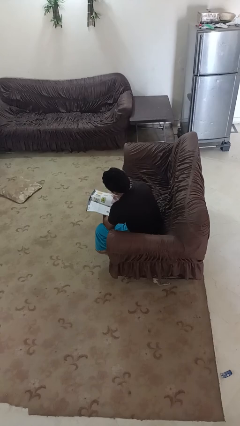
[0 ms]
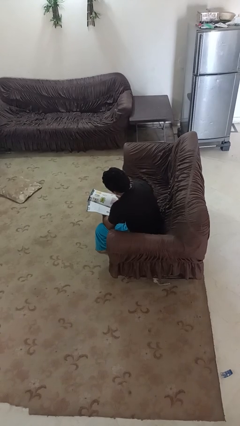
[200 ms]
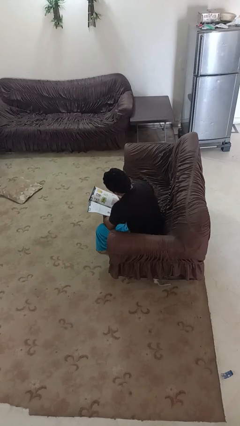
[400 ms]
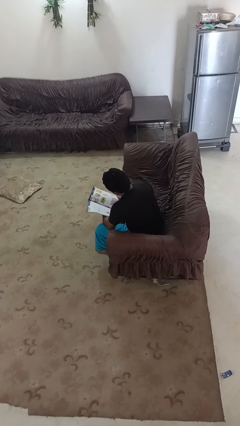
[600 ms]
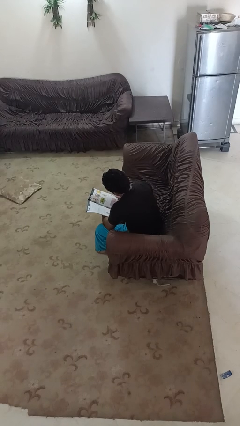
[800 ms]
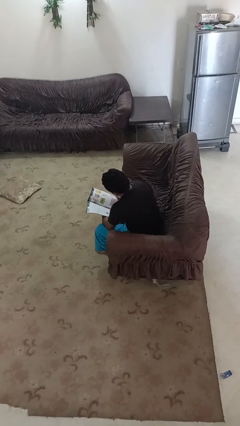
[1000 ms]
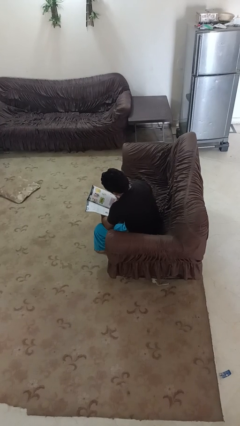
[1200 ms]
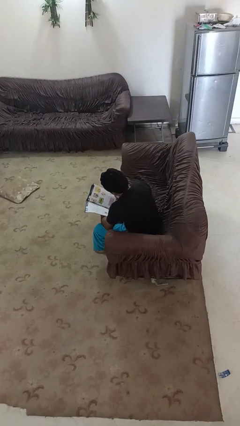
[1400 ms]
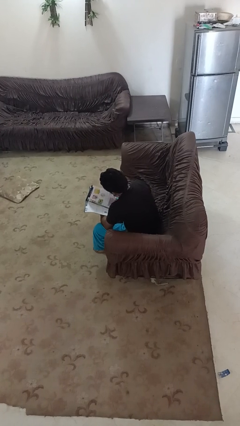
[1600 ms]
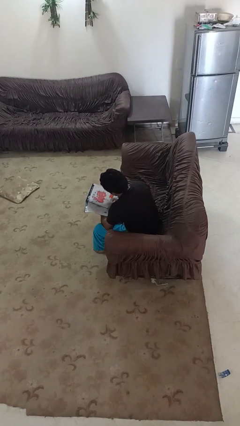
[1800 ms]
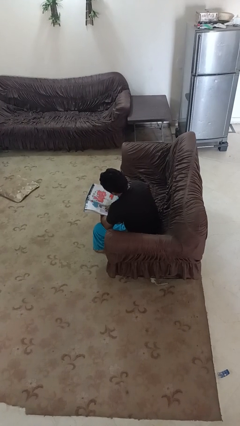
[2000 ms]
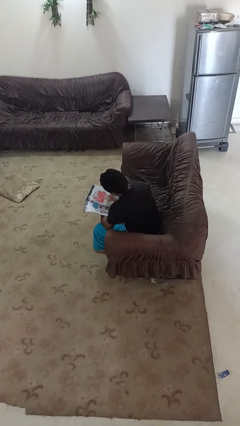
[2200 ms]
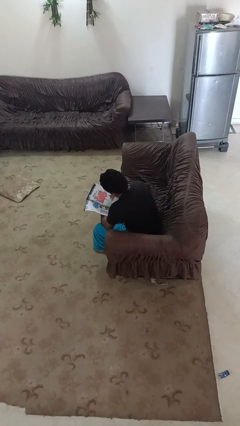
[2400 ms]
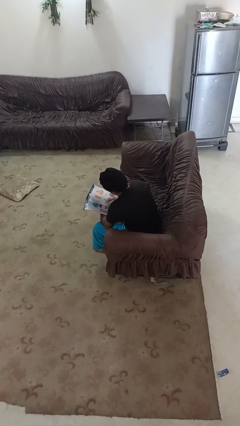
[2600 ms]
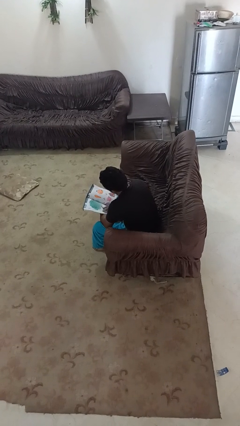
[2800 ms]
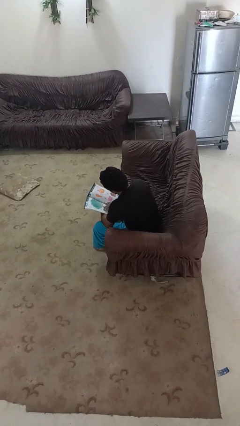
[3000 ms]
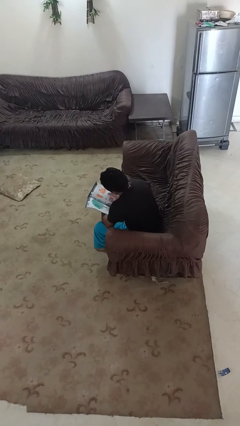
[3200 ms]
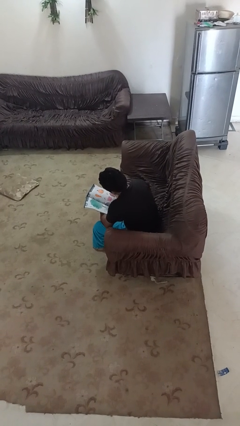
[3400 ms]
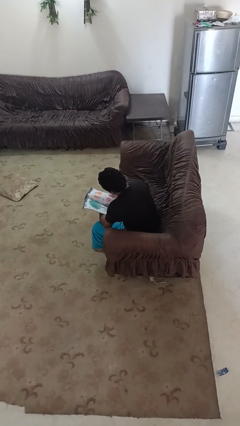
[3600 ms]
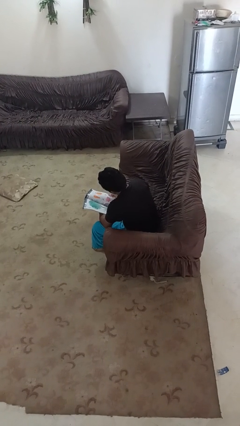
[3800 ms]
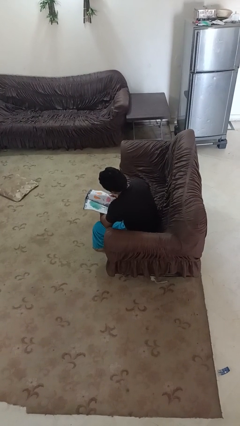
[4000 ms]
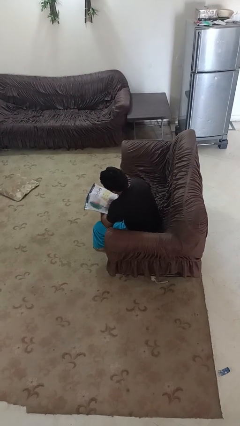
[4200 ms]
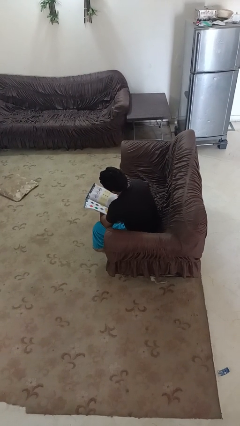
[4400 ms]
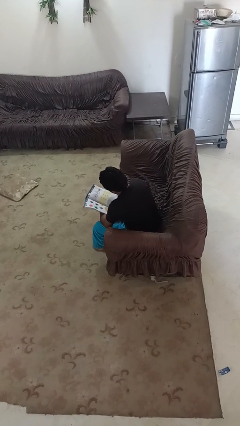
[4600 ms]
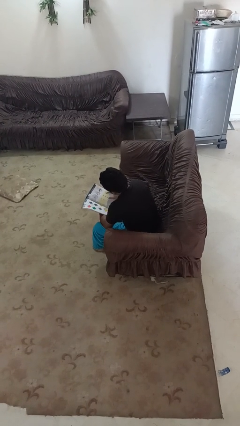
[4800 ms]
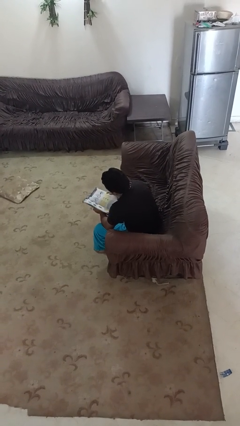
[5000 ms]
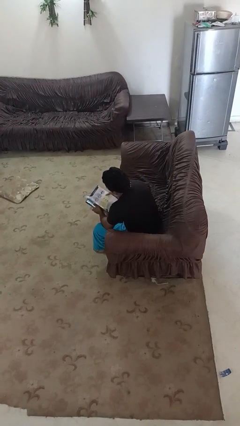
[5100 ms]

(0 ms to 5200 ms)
person reads book

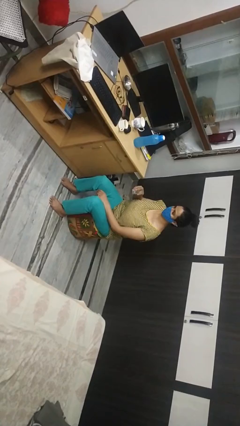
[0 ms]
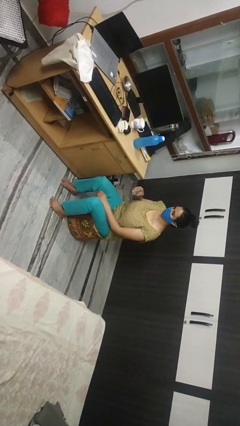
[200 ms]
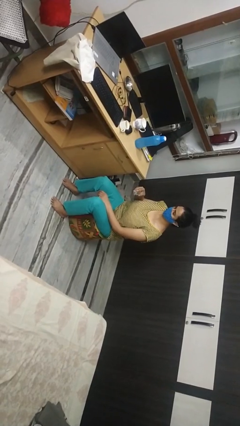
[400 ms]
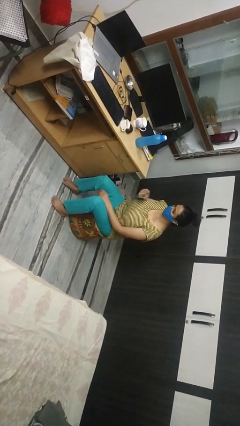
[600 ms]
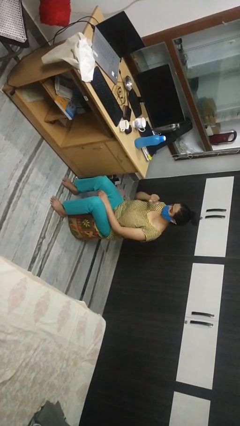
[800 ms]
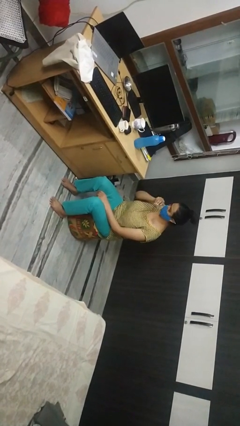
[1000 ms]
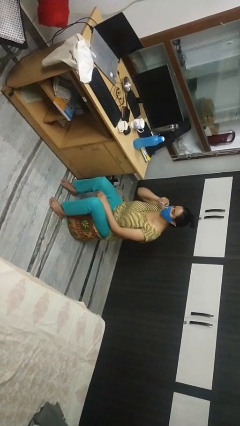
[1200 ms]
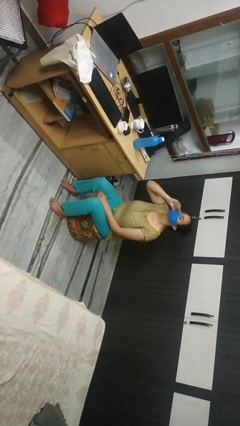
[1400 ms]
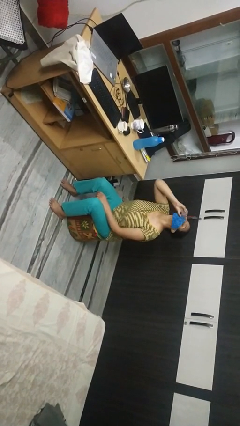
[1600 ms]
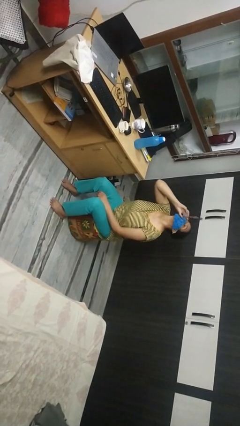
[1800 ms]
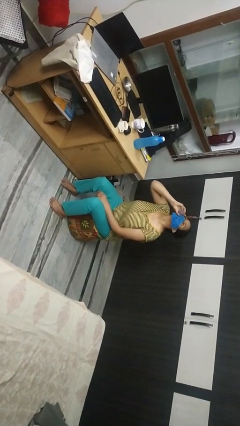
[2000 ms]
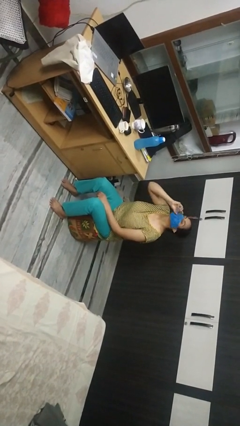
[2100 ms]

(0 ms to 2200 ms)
person drinks from shotglass

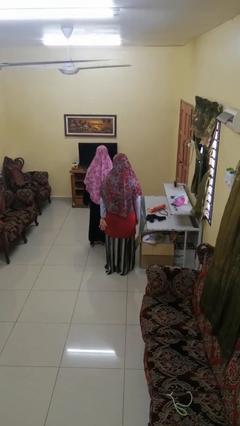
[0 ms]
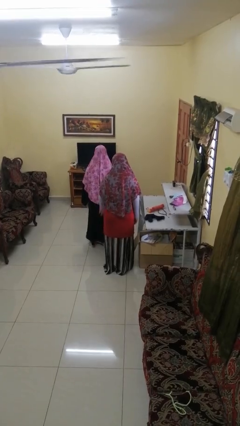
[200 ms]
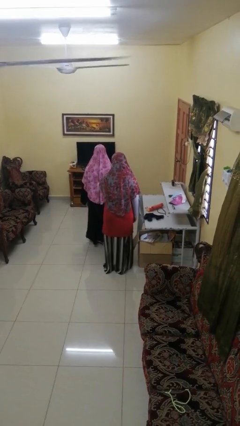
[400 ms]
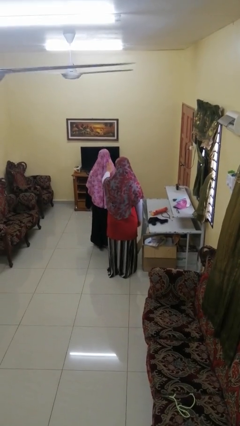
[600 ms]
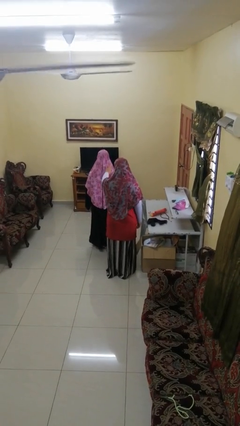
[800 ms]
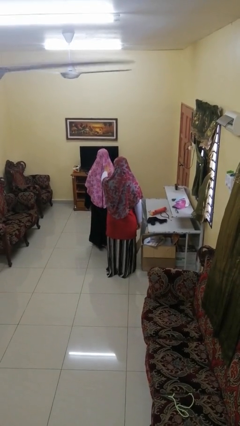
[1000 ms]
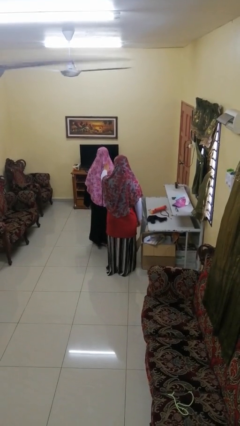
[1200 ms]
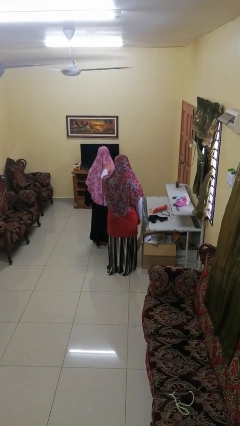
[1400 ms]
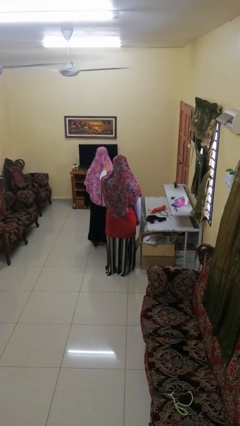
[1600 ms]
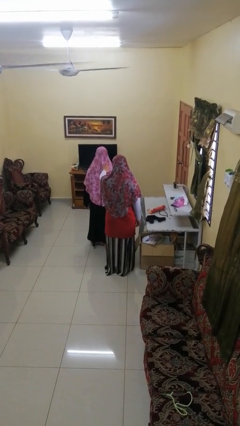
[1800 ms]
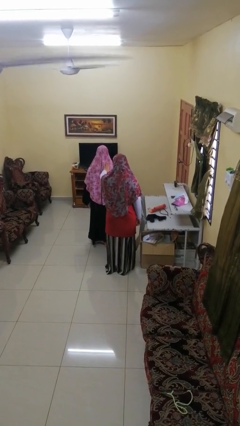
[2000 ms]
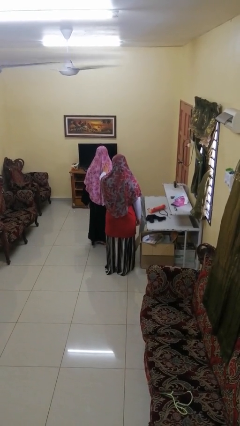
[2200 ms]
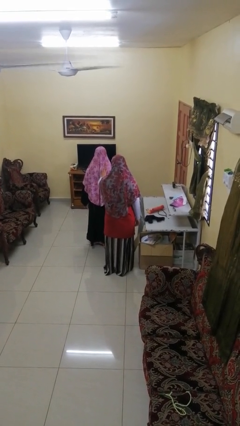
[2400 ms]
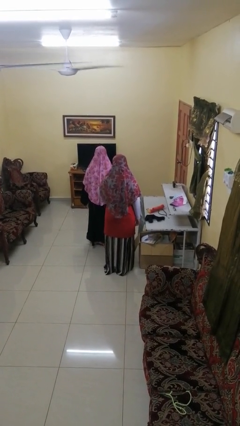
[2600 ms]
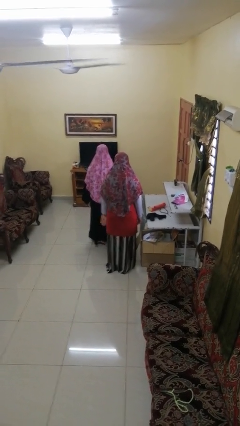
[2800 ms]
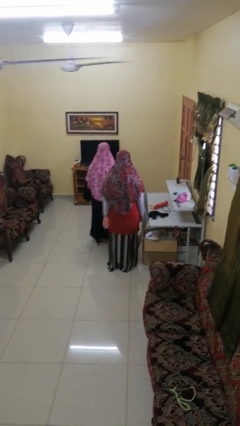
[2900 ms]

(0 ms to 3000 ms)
person touches back of person

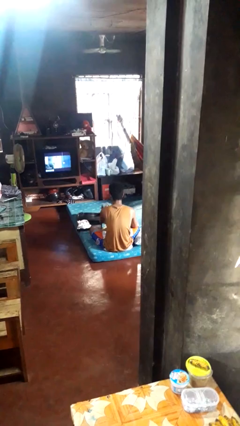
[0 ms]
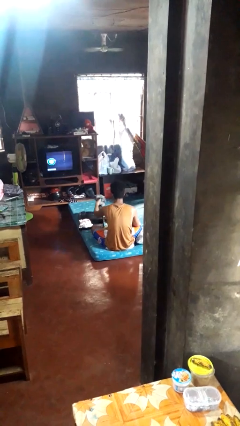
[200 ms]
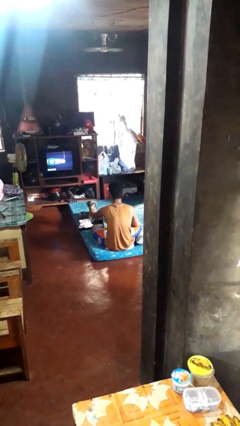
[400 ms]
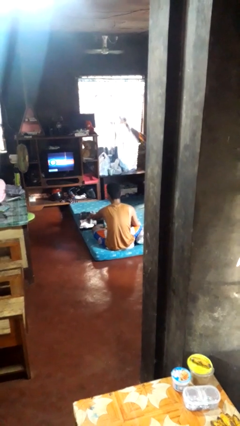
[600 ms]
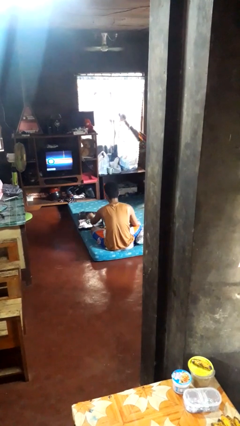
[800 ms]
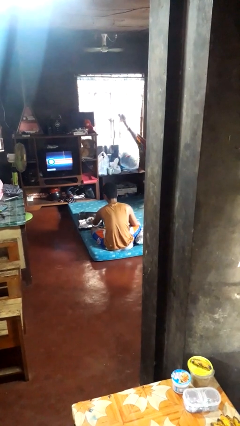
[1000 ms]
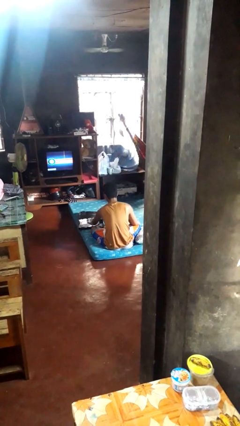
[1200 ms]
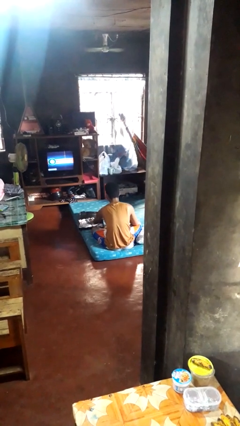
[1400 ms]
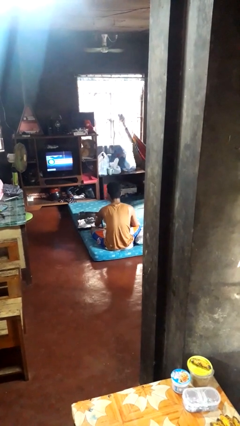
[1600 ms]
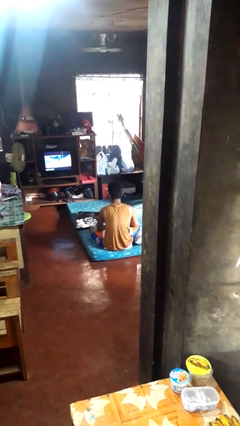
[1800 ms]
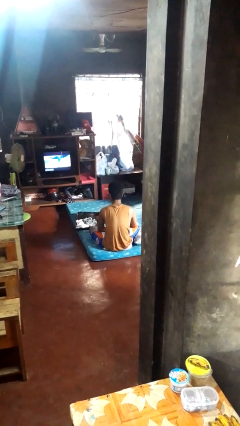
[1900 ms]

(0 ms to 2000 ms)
person loads clothes into suitcase

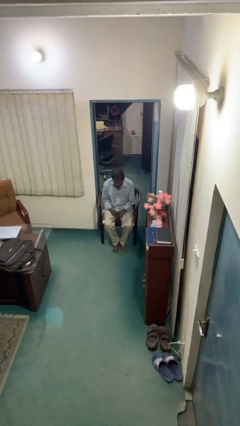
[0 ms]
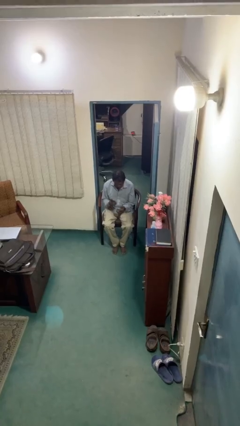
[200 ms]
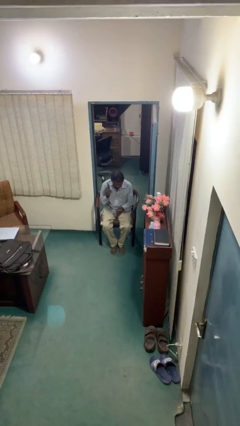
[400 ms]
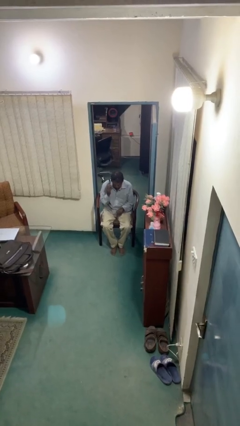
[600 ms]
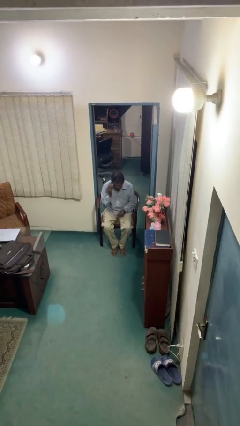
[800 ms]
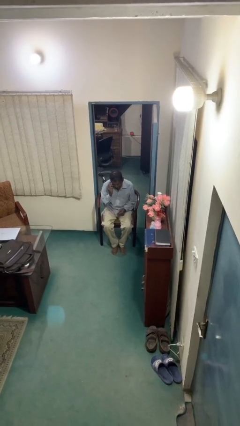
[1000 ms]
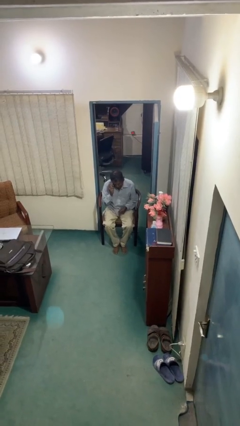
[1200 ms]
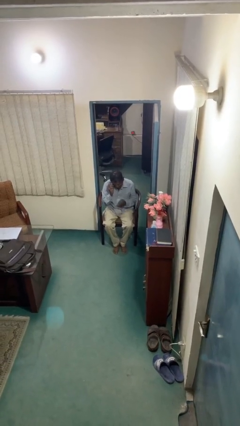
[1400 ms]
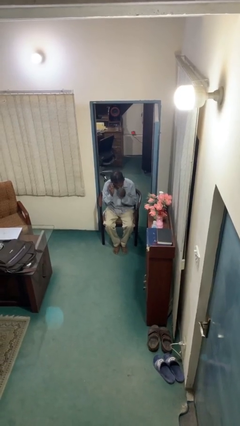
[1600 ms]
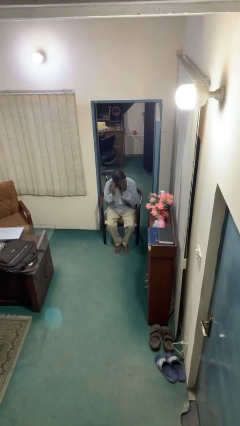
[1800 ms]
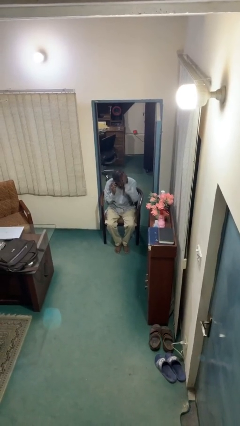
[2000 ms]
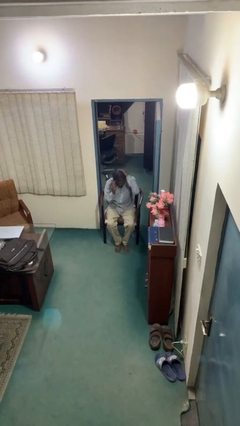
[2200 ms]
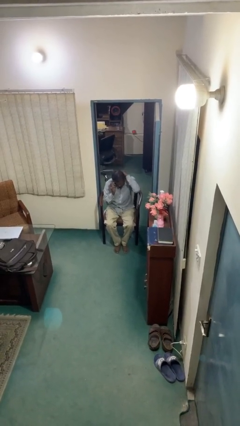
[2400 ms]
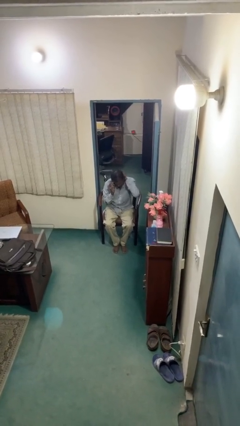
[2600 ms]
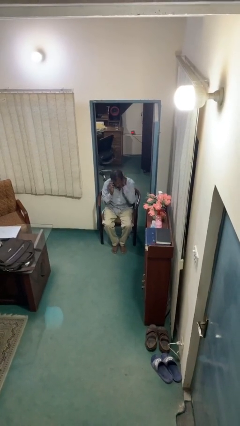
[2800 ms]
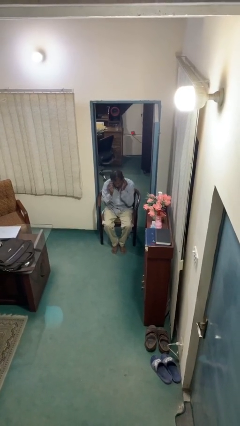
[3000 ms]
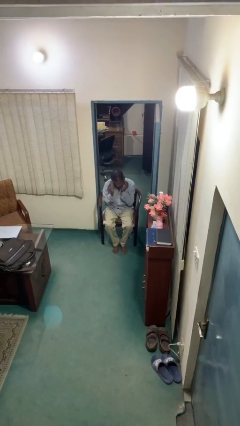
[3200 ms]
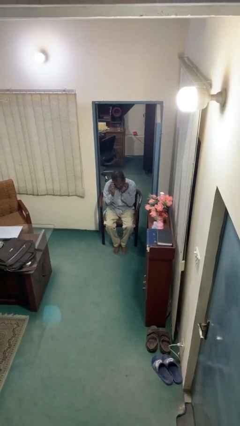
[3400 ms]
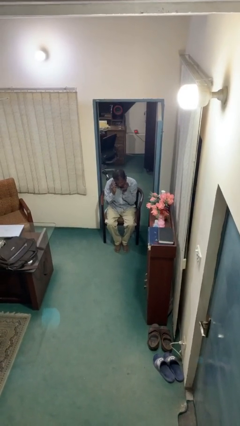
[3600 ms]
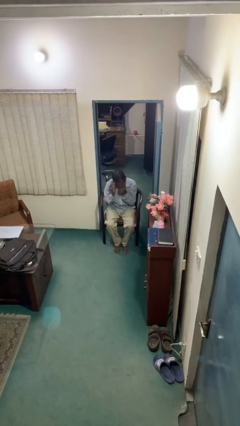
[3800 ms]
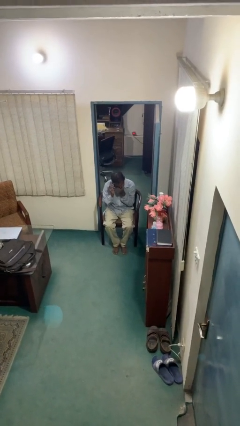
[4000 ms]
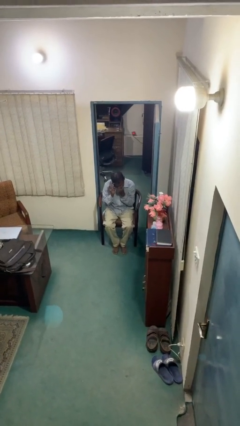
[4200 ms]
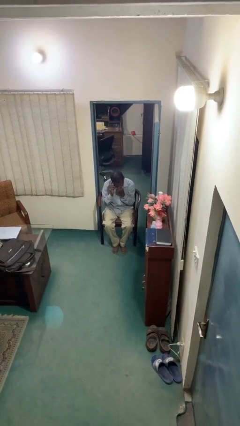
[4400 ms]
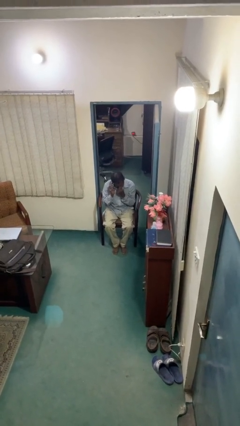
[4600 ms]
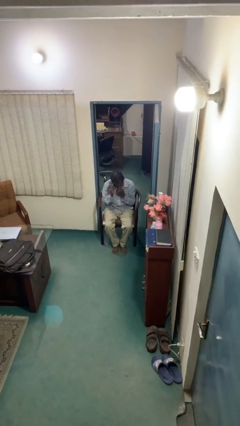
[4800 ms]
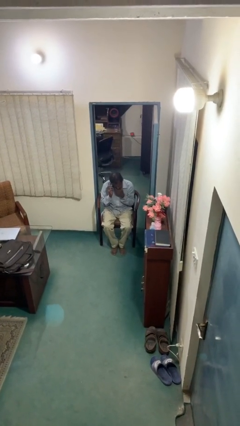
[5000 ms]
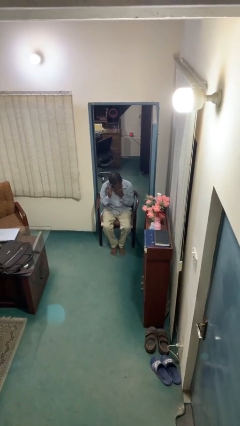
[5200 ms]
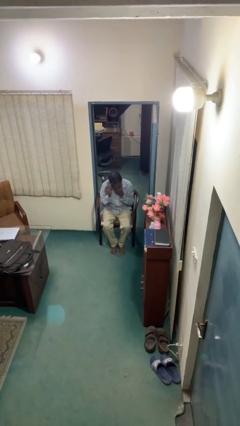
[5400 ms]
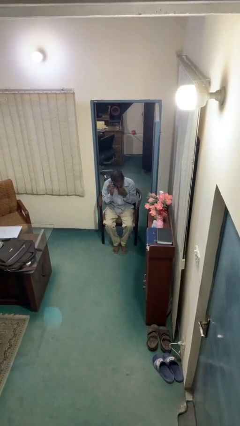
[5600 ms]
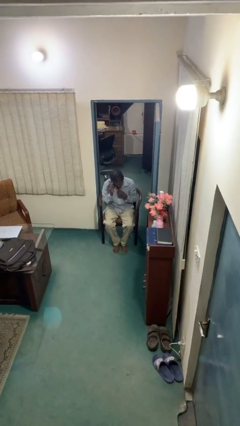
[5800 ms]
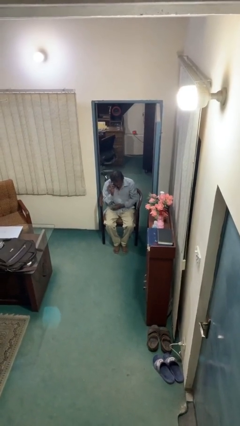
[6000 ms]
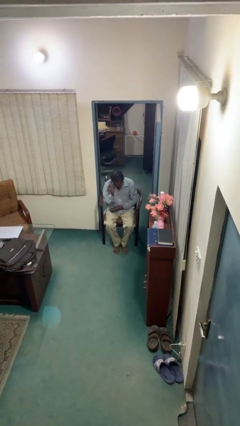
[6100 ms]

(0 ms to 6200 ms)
person talks on phone
